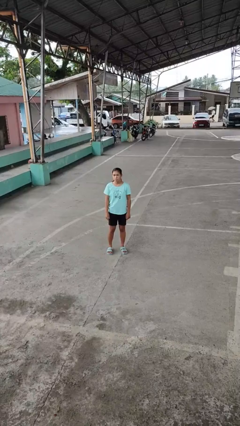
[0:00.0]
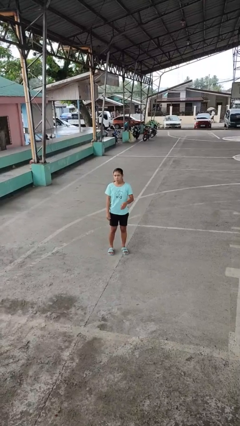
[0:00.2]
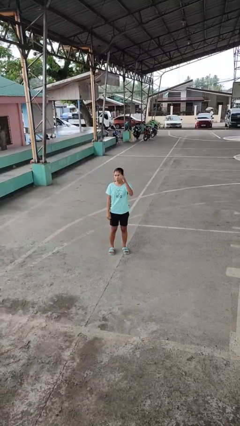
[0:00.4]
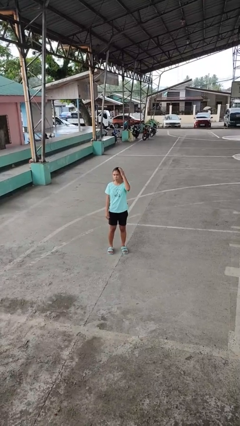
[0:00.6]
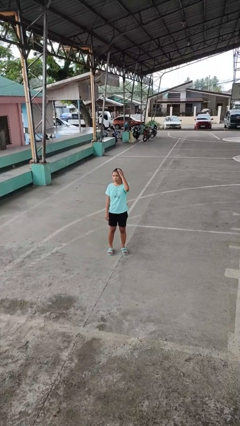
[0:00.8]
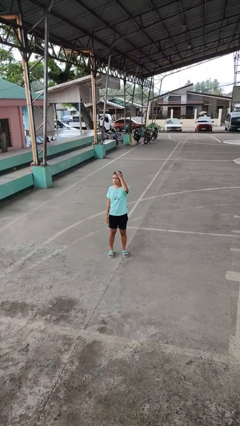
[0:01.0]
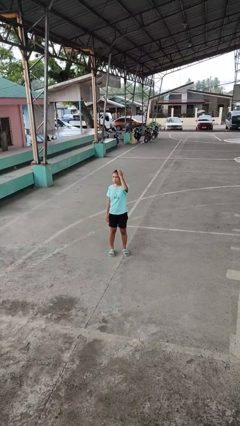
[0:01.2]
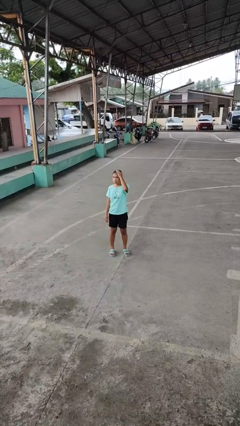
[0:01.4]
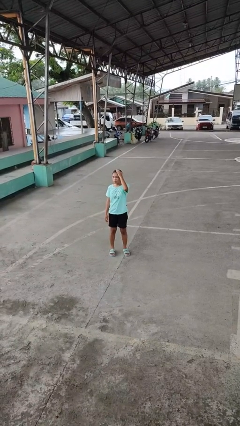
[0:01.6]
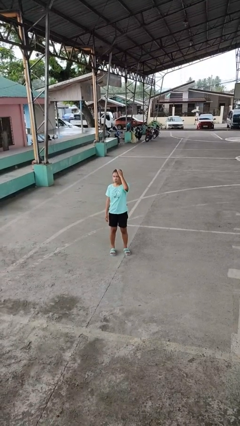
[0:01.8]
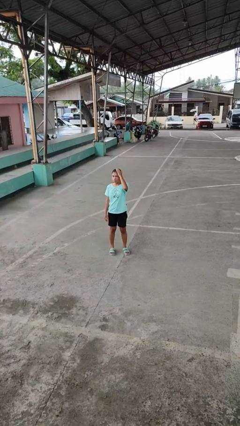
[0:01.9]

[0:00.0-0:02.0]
person pats head

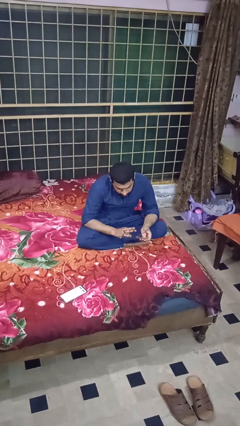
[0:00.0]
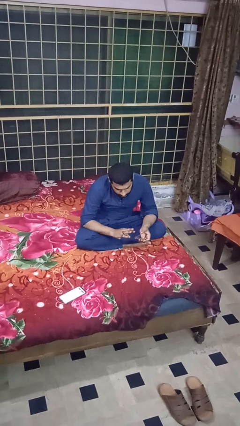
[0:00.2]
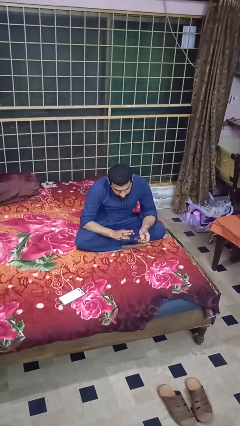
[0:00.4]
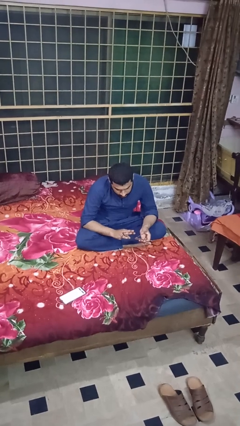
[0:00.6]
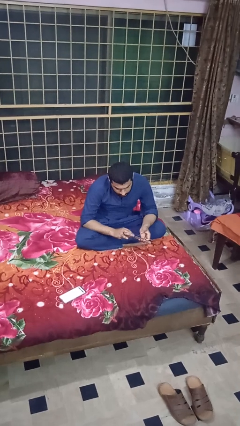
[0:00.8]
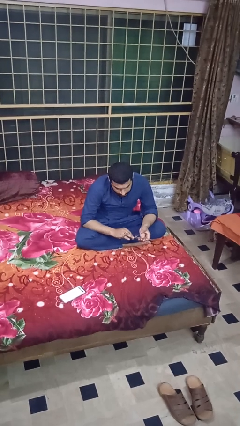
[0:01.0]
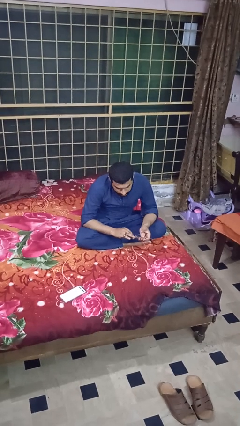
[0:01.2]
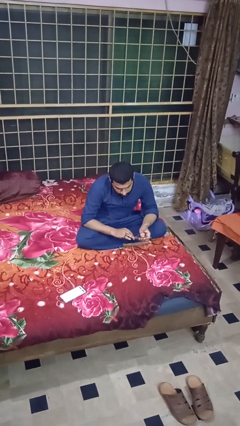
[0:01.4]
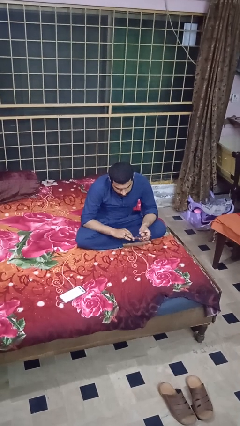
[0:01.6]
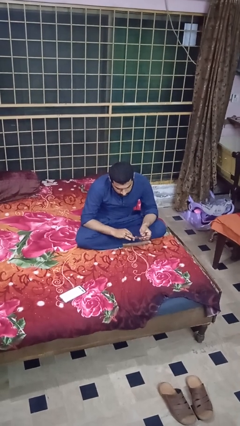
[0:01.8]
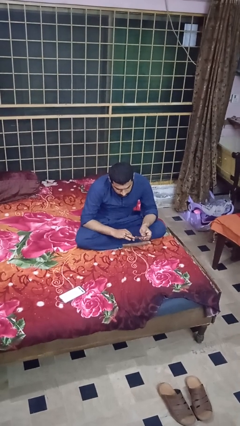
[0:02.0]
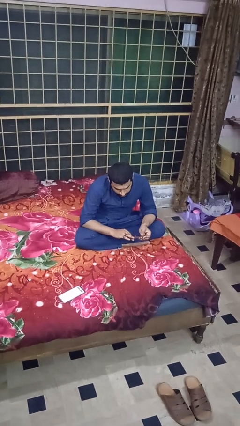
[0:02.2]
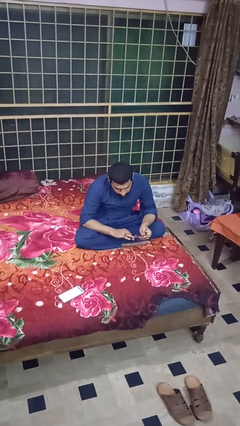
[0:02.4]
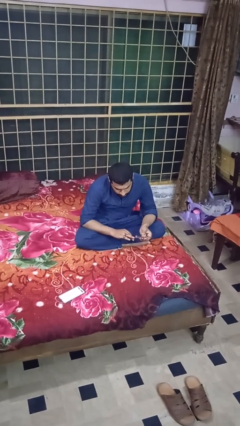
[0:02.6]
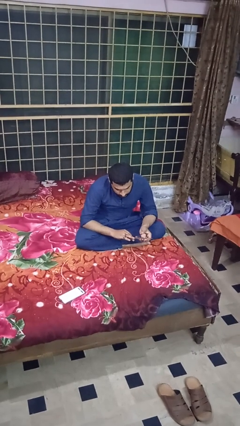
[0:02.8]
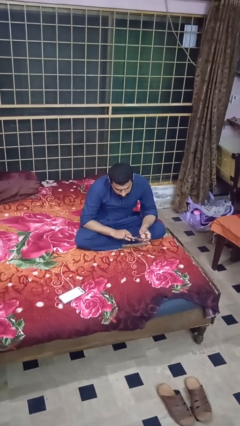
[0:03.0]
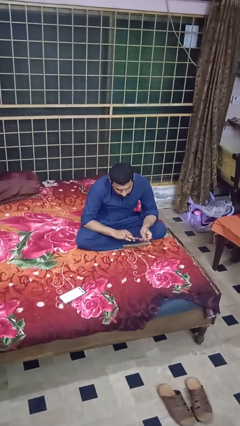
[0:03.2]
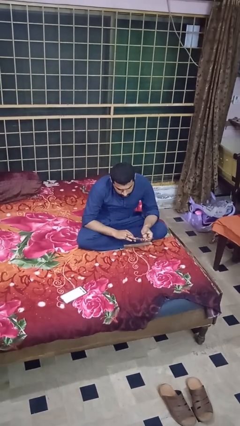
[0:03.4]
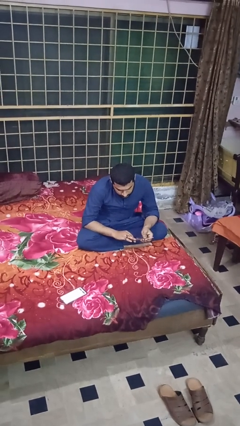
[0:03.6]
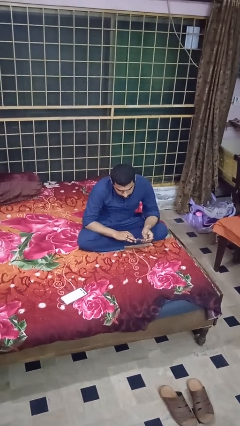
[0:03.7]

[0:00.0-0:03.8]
person clips fingernails

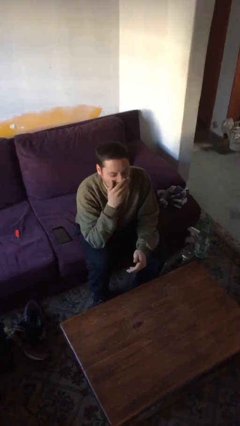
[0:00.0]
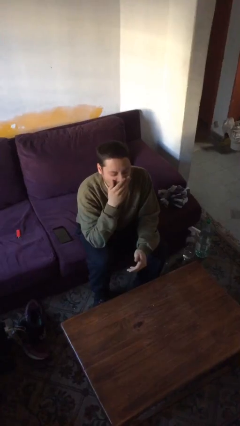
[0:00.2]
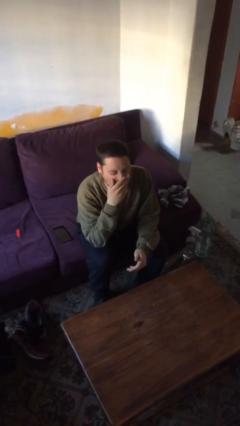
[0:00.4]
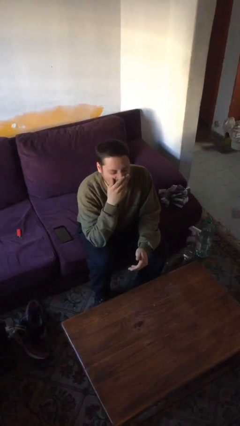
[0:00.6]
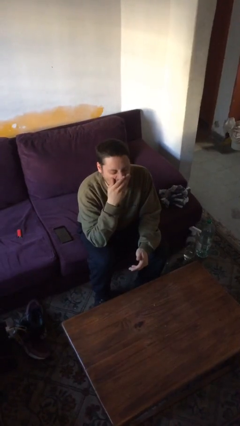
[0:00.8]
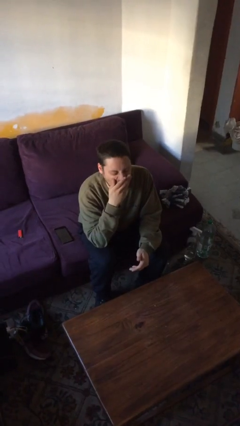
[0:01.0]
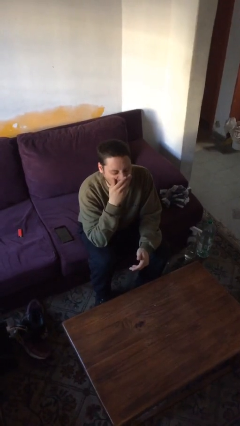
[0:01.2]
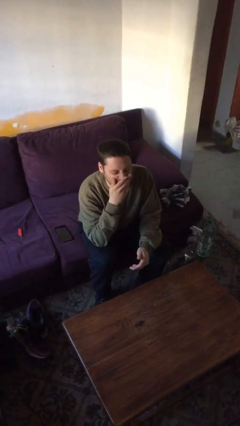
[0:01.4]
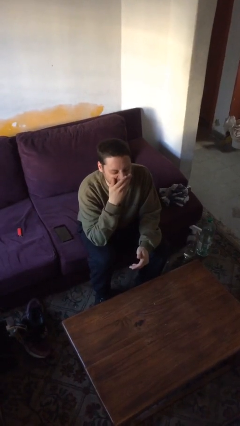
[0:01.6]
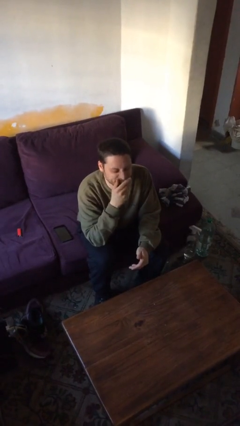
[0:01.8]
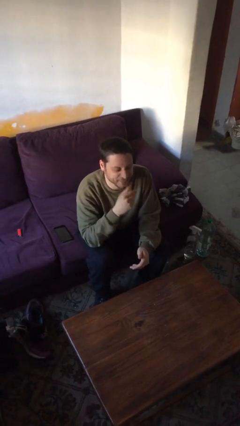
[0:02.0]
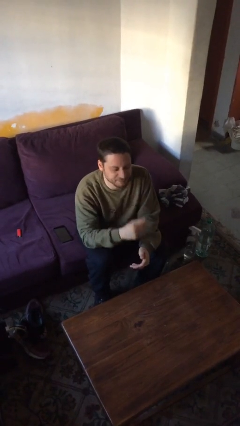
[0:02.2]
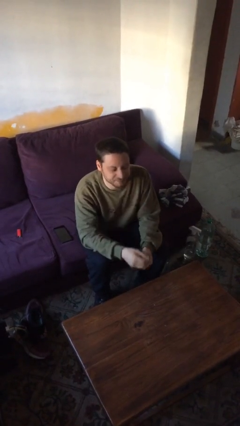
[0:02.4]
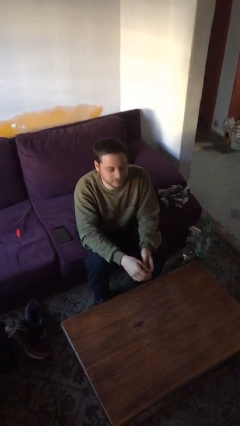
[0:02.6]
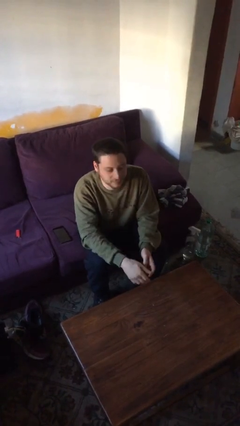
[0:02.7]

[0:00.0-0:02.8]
person yawns

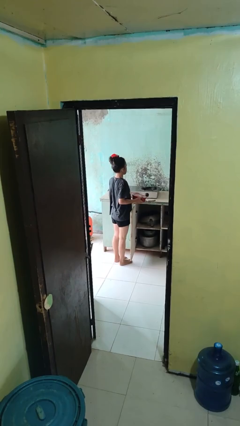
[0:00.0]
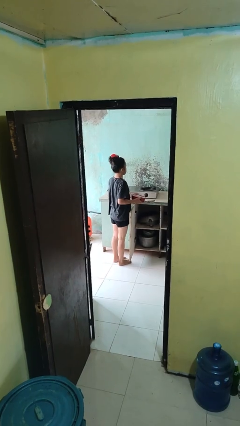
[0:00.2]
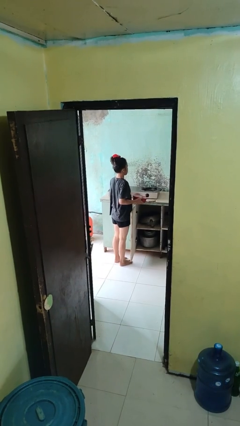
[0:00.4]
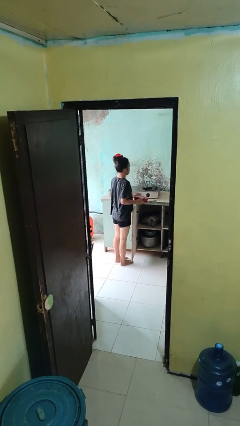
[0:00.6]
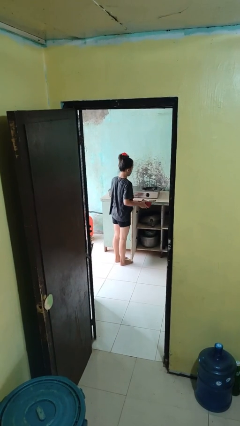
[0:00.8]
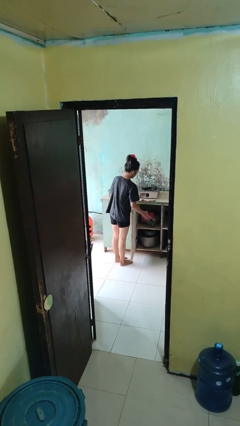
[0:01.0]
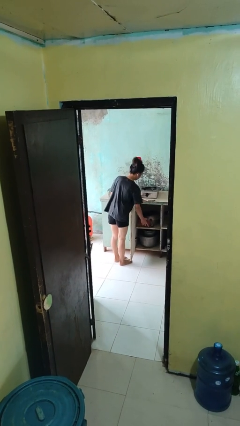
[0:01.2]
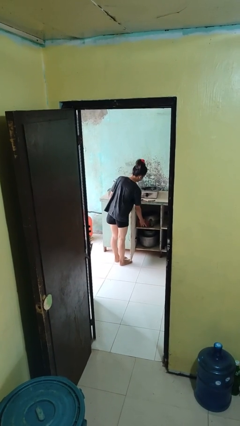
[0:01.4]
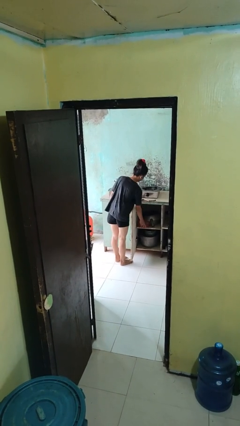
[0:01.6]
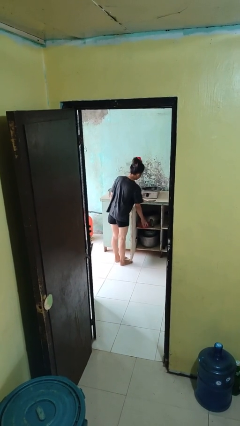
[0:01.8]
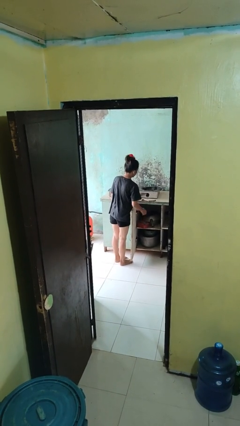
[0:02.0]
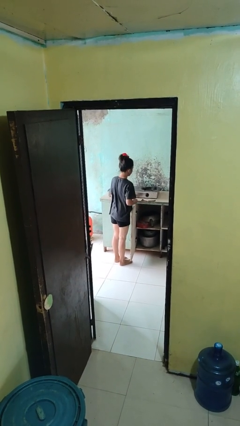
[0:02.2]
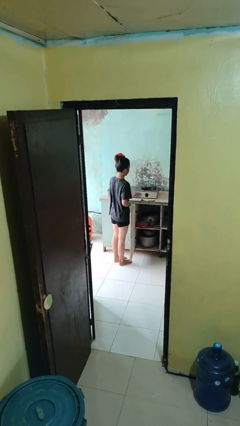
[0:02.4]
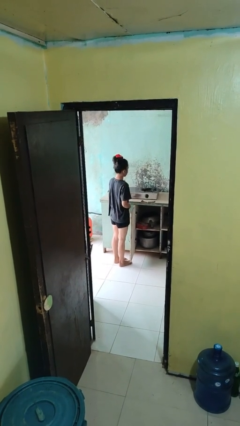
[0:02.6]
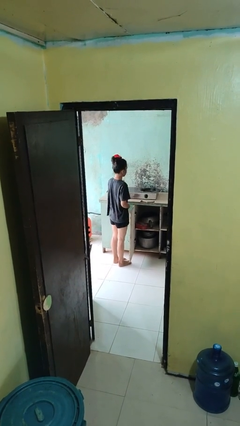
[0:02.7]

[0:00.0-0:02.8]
person puts object in cabinet

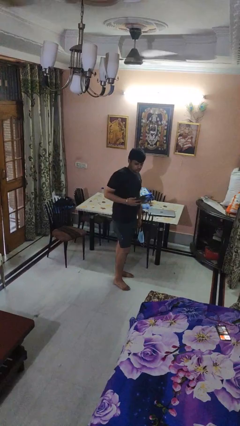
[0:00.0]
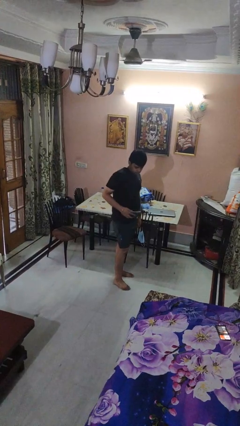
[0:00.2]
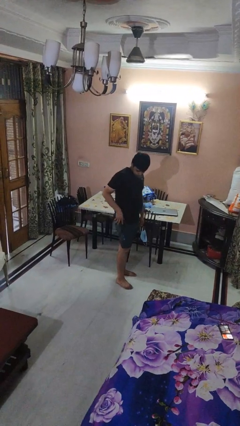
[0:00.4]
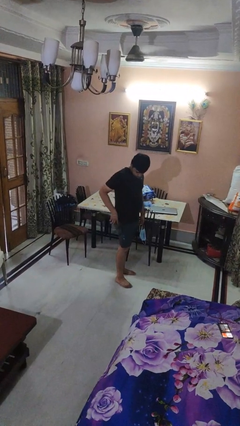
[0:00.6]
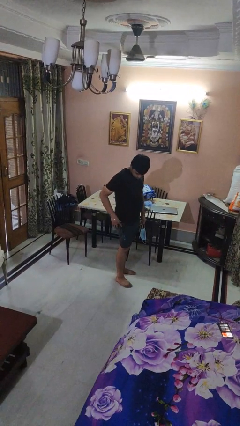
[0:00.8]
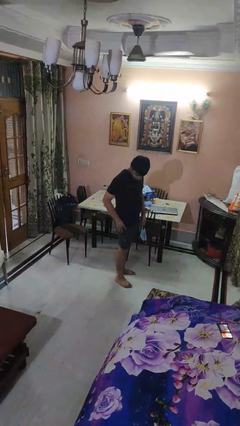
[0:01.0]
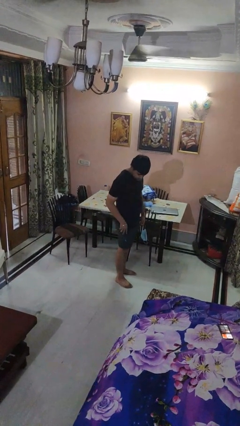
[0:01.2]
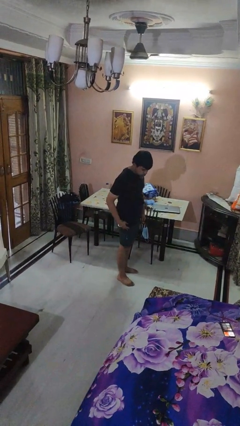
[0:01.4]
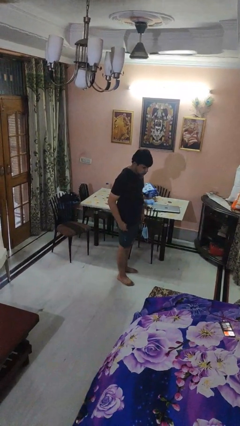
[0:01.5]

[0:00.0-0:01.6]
person puts phone into pocket

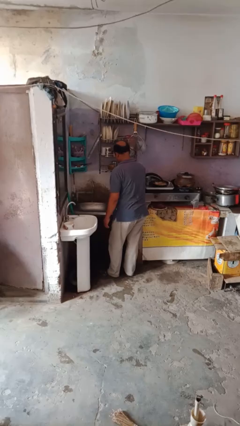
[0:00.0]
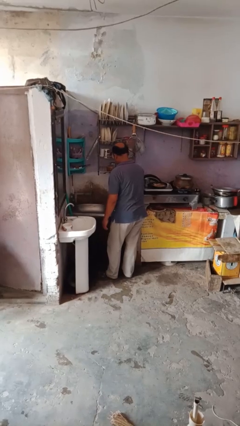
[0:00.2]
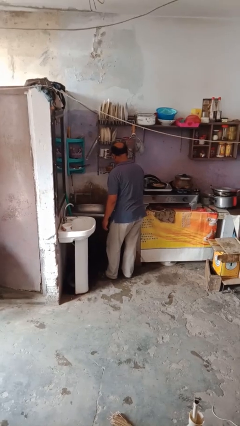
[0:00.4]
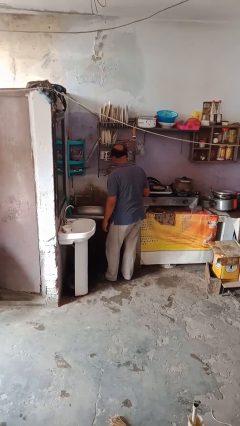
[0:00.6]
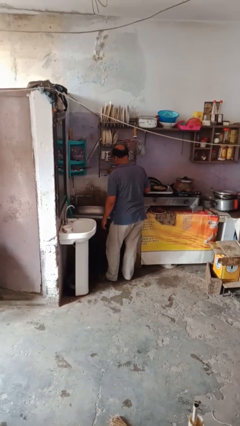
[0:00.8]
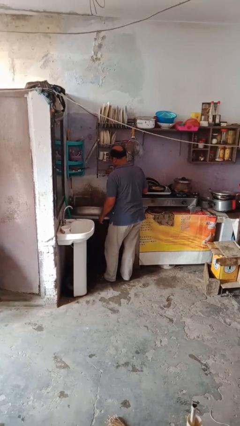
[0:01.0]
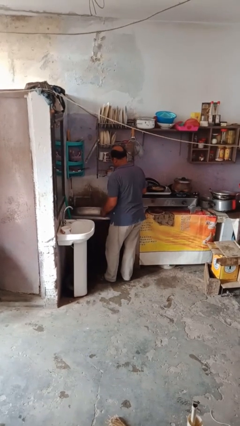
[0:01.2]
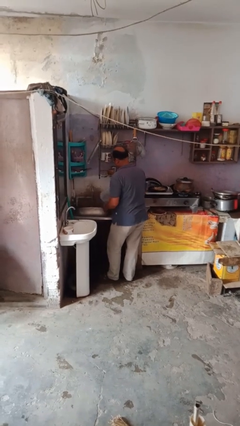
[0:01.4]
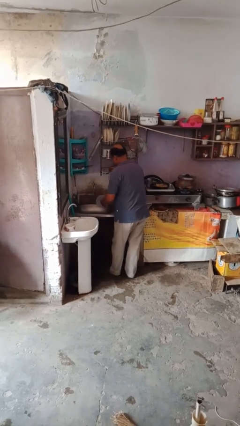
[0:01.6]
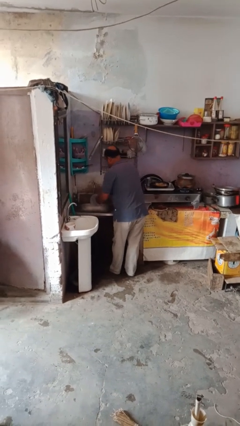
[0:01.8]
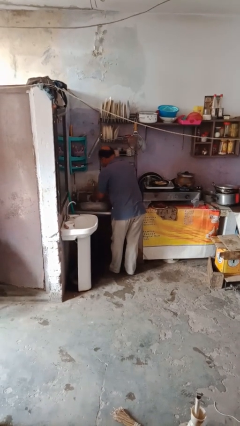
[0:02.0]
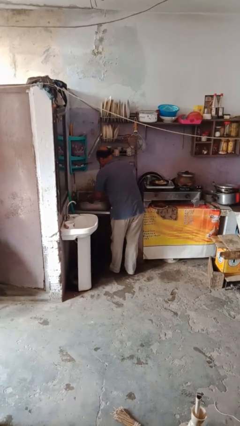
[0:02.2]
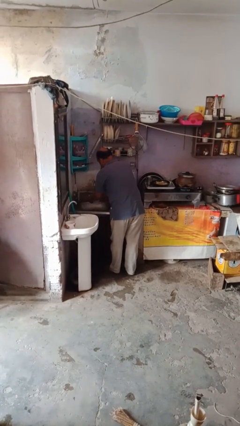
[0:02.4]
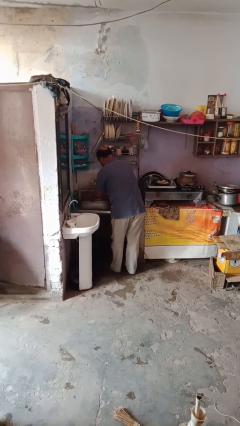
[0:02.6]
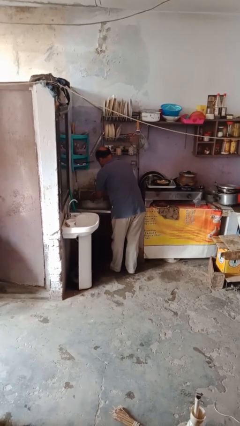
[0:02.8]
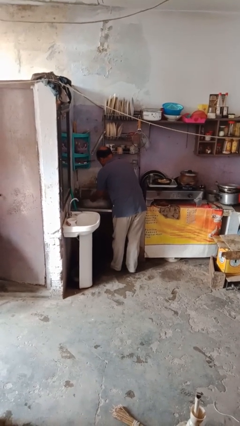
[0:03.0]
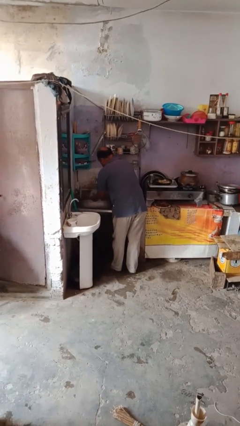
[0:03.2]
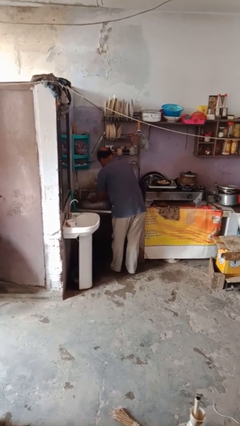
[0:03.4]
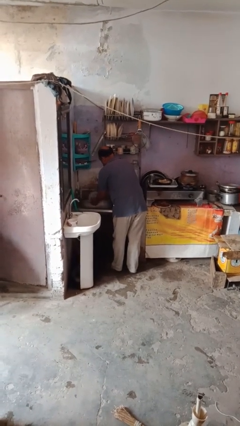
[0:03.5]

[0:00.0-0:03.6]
person washes dish

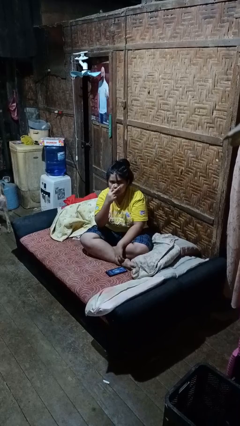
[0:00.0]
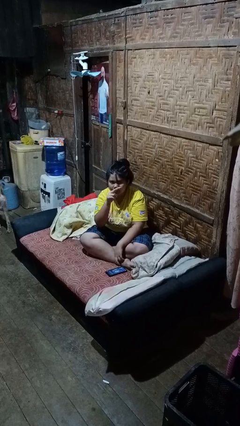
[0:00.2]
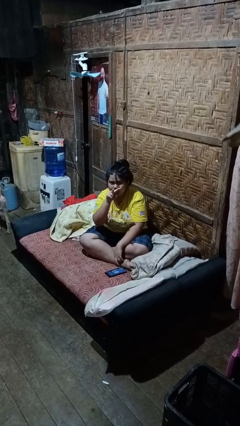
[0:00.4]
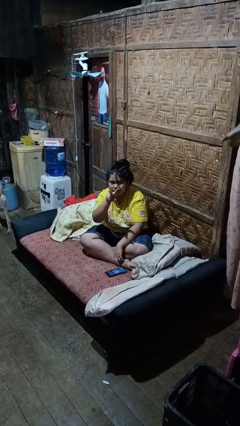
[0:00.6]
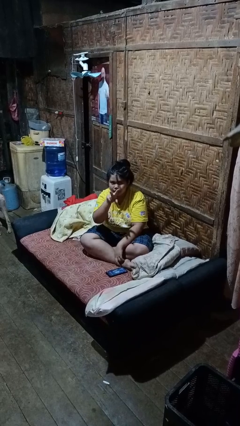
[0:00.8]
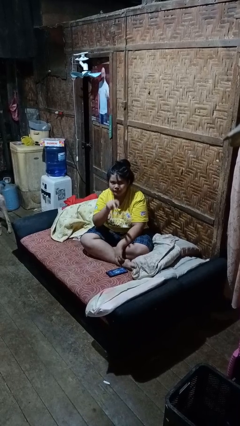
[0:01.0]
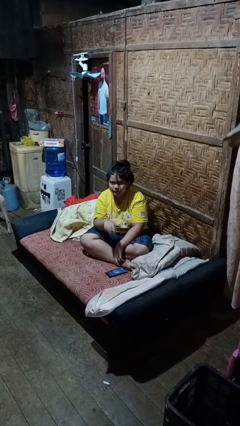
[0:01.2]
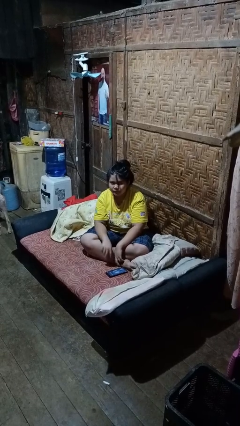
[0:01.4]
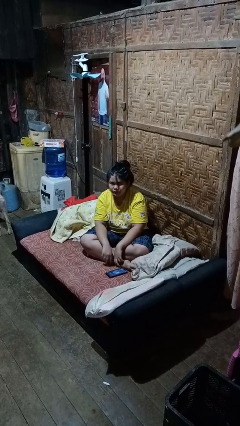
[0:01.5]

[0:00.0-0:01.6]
person gestures watch closely
